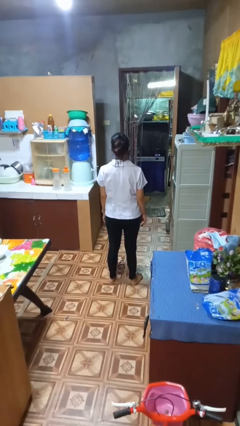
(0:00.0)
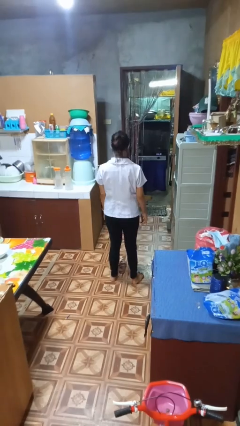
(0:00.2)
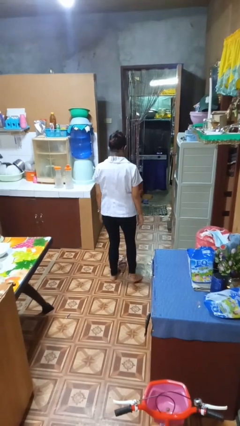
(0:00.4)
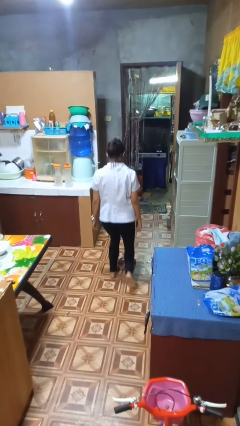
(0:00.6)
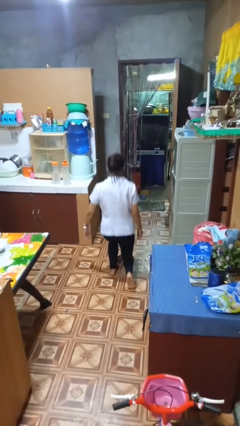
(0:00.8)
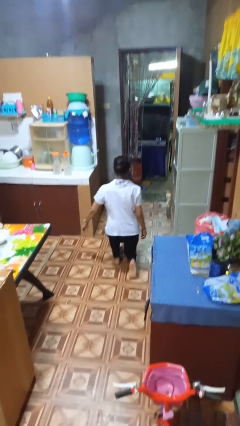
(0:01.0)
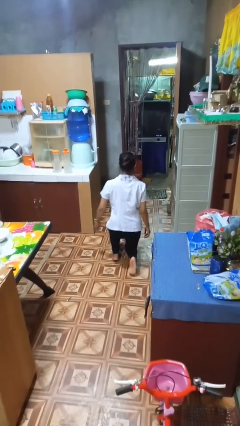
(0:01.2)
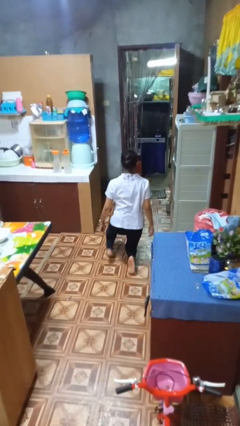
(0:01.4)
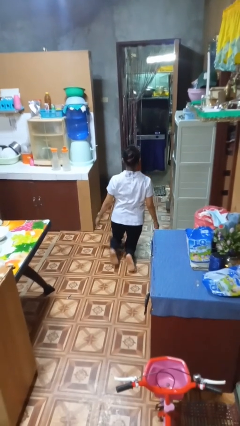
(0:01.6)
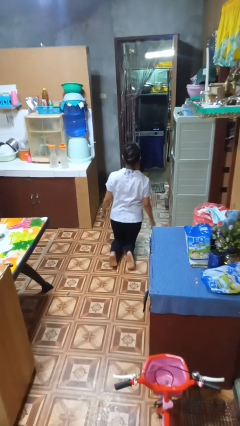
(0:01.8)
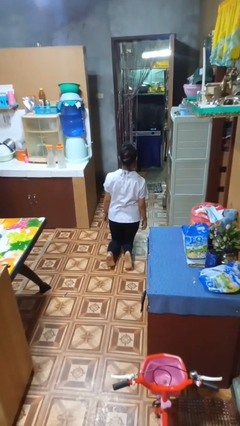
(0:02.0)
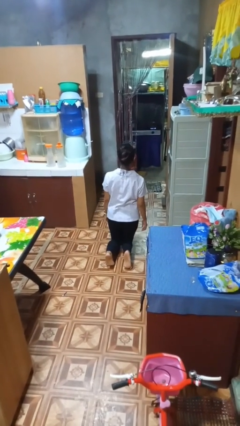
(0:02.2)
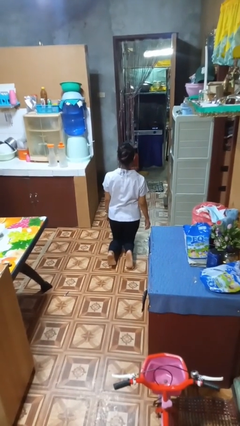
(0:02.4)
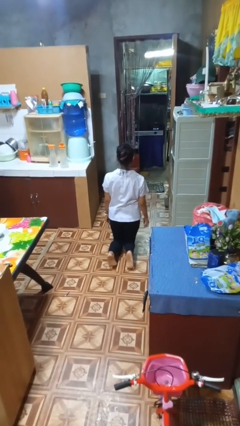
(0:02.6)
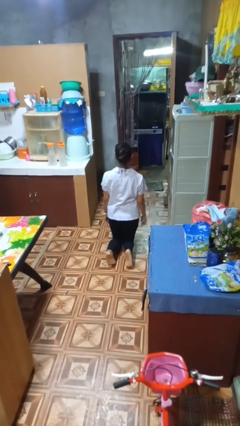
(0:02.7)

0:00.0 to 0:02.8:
person kneels

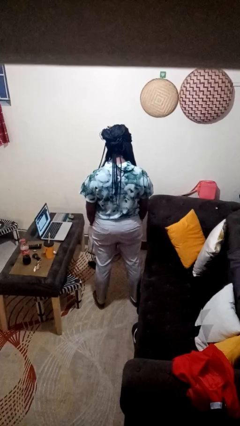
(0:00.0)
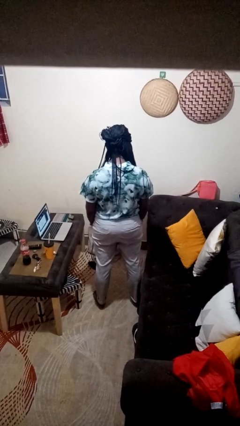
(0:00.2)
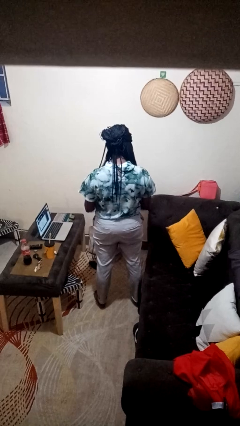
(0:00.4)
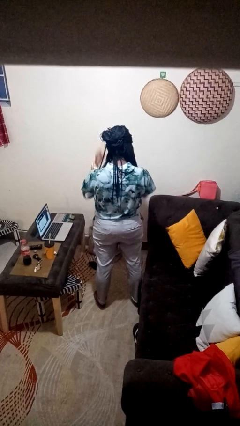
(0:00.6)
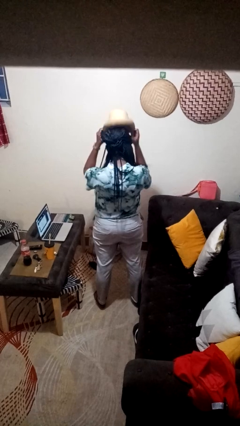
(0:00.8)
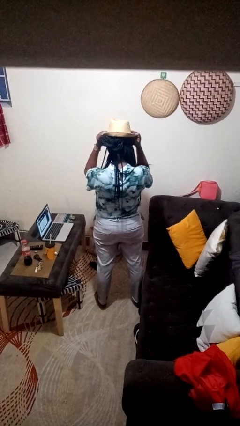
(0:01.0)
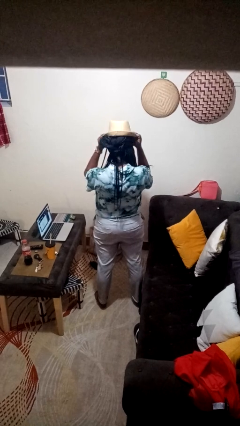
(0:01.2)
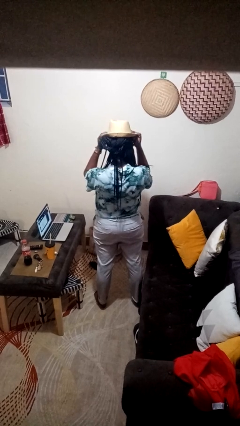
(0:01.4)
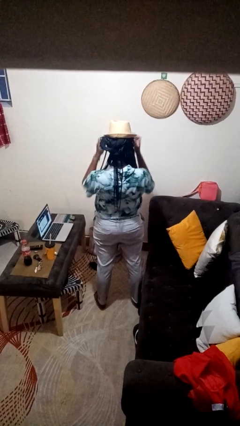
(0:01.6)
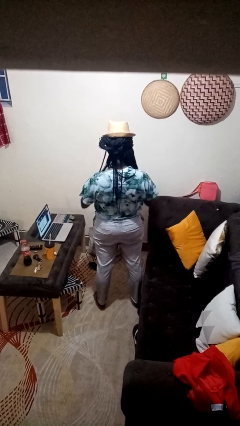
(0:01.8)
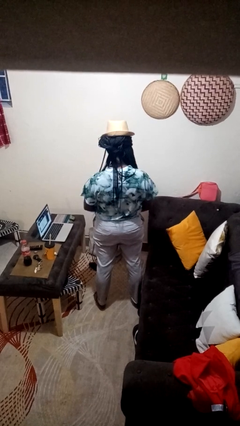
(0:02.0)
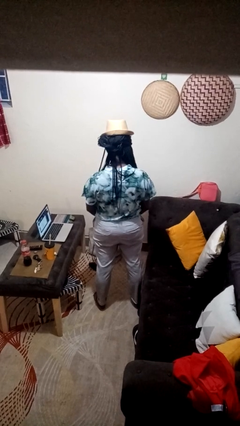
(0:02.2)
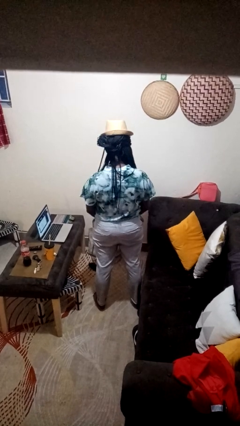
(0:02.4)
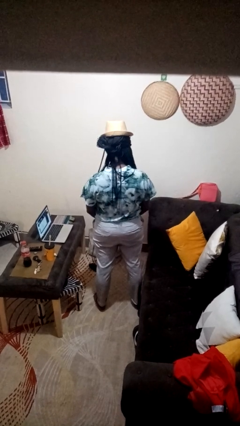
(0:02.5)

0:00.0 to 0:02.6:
person puts on hat

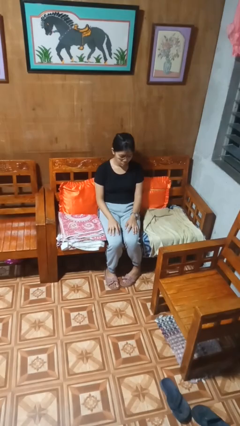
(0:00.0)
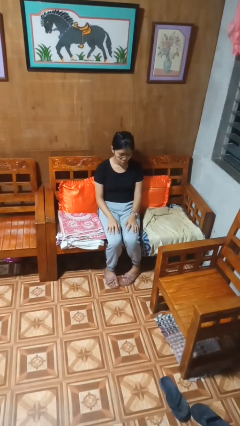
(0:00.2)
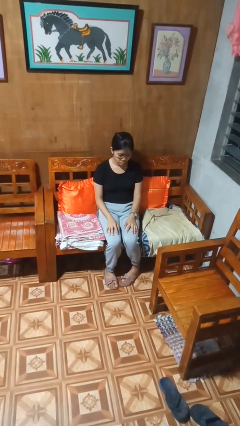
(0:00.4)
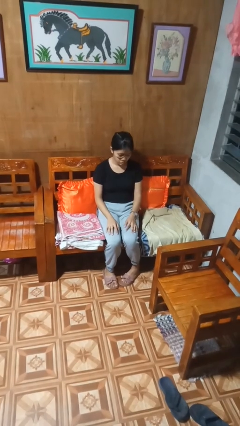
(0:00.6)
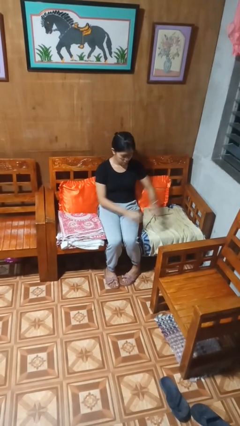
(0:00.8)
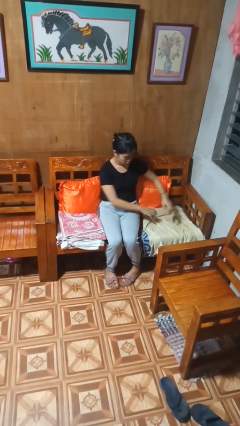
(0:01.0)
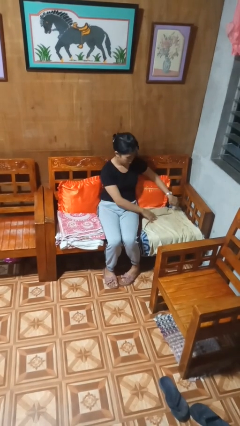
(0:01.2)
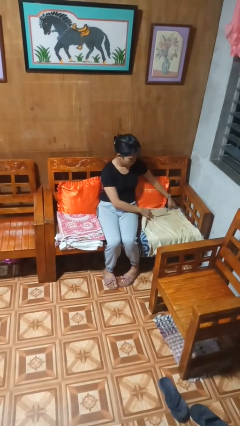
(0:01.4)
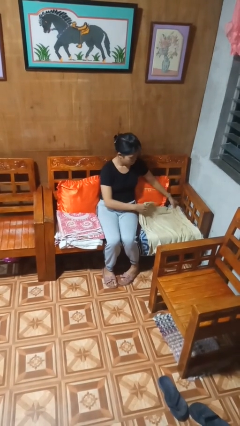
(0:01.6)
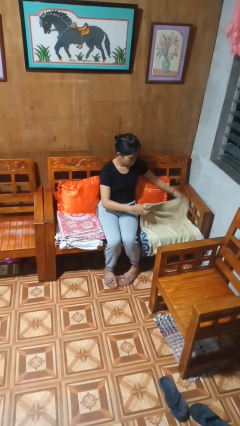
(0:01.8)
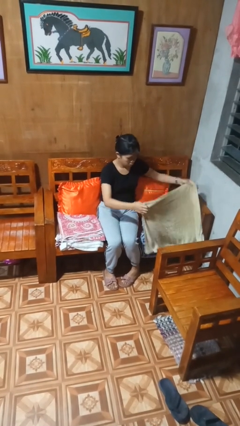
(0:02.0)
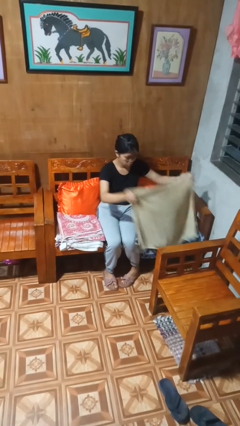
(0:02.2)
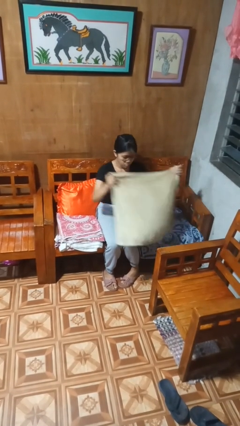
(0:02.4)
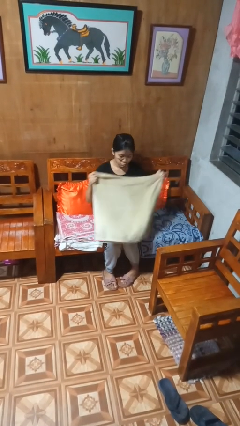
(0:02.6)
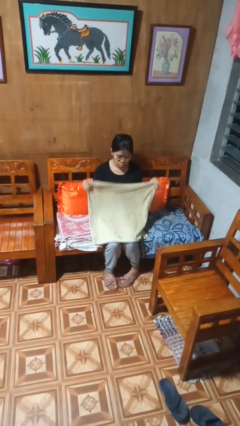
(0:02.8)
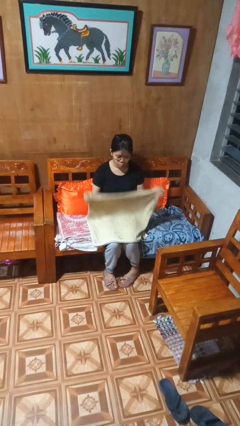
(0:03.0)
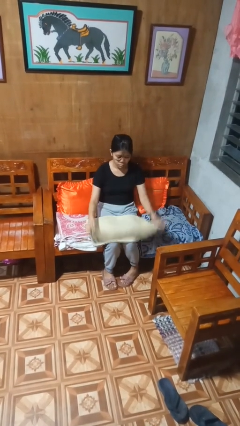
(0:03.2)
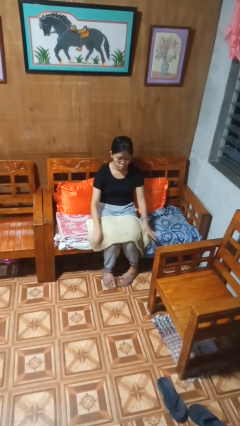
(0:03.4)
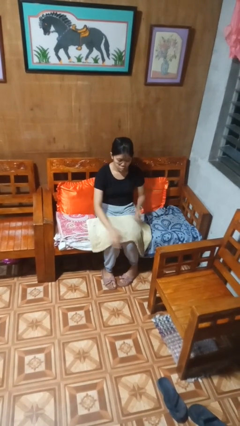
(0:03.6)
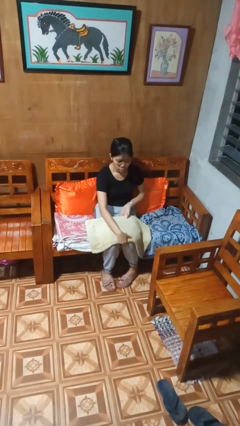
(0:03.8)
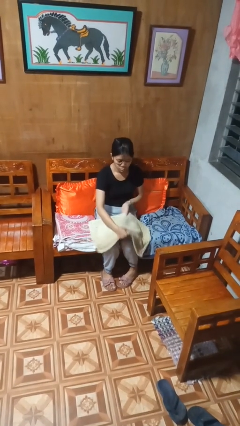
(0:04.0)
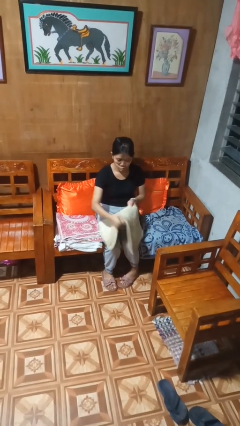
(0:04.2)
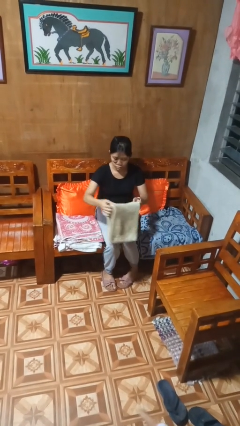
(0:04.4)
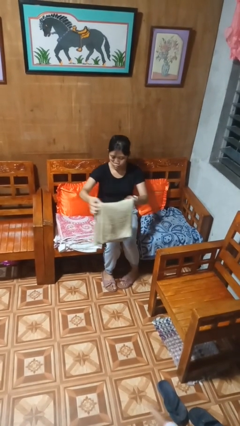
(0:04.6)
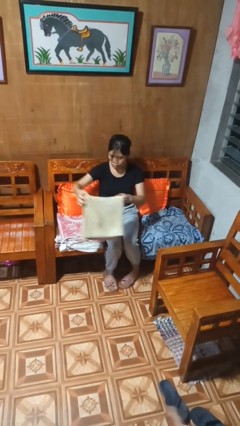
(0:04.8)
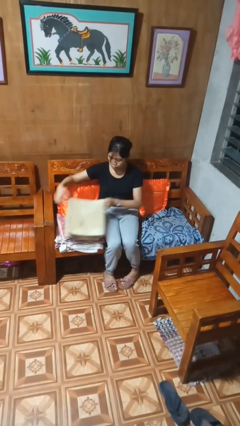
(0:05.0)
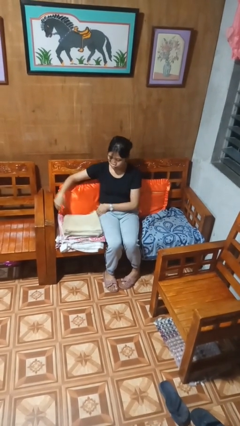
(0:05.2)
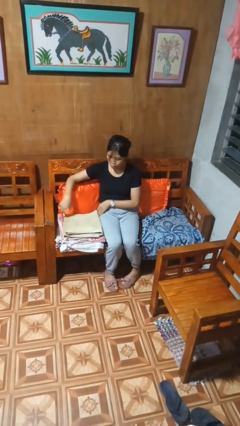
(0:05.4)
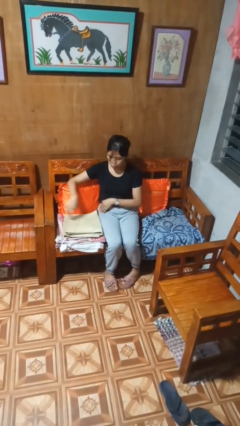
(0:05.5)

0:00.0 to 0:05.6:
person folds towel

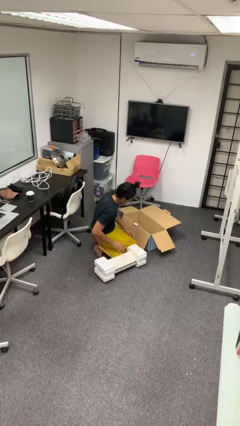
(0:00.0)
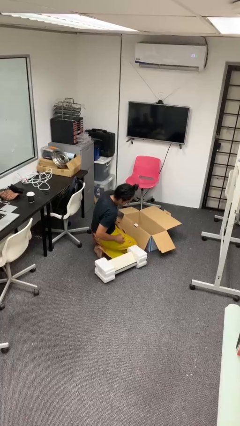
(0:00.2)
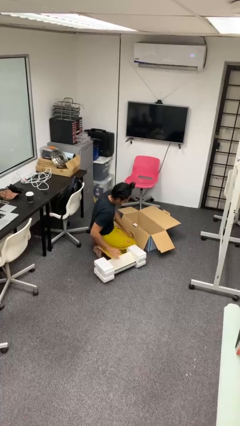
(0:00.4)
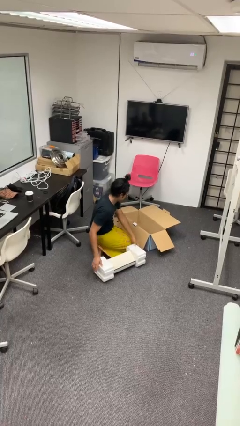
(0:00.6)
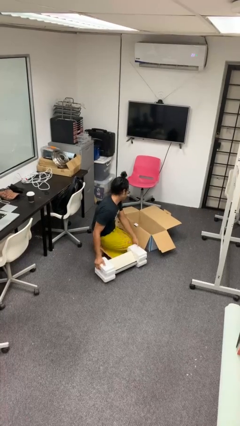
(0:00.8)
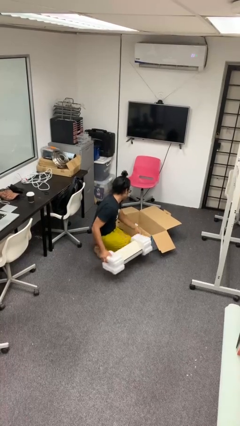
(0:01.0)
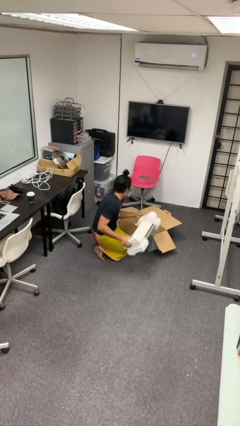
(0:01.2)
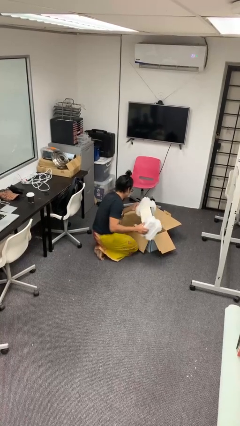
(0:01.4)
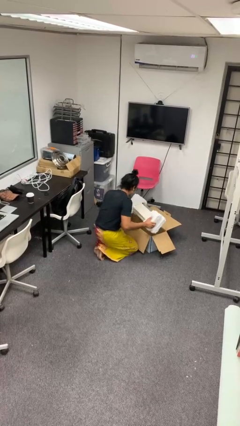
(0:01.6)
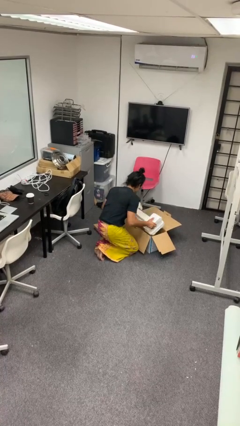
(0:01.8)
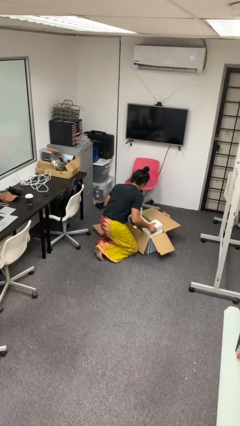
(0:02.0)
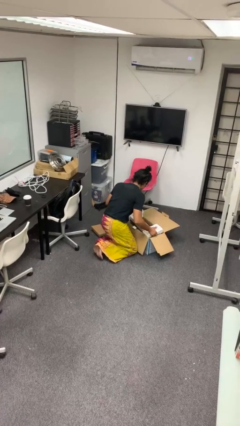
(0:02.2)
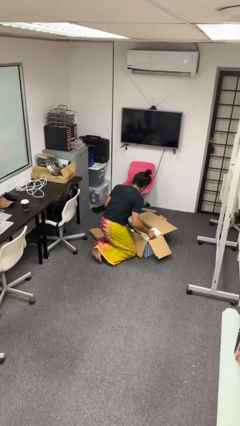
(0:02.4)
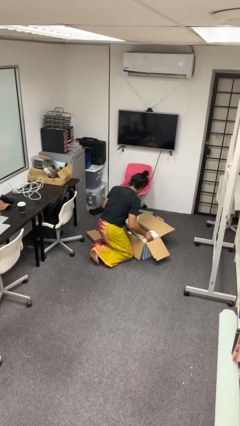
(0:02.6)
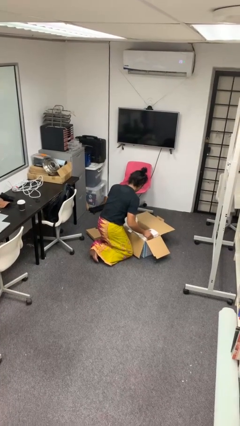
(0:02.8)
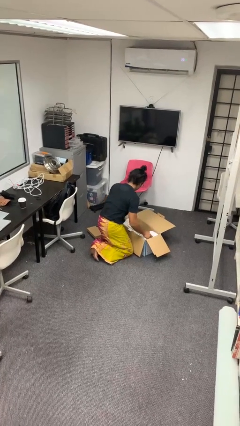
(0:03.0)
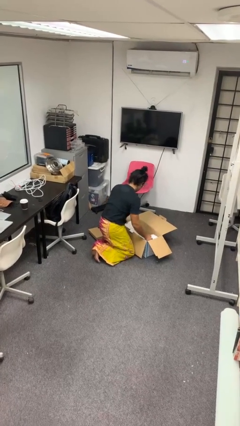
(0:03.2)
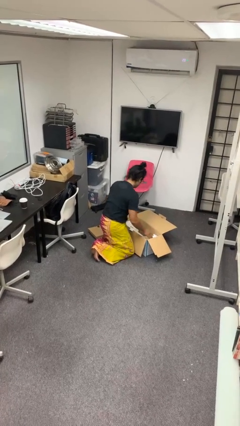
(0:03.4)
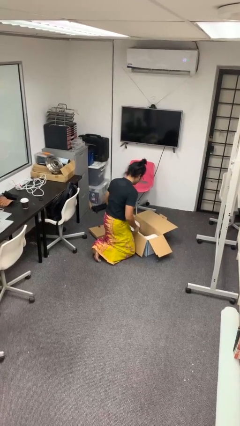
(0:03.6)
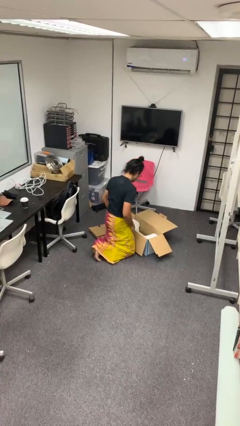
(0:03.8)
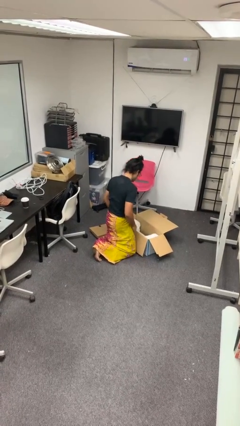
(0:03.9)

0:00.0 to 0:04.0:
person puts object into box

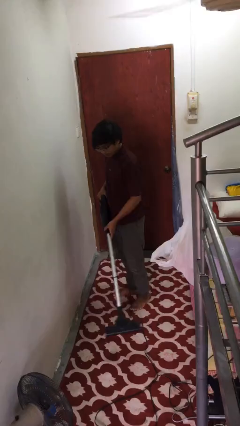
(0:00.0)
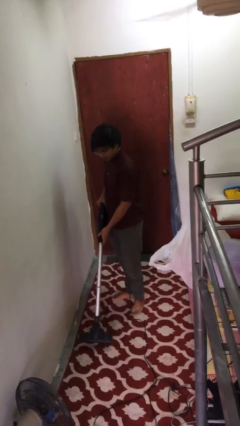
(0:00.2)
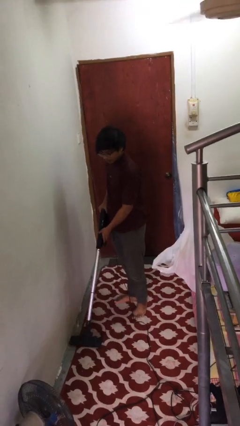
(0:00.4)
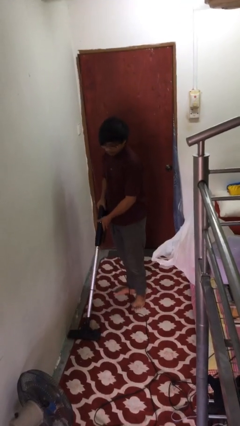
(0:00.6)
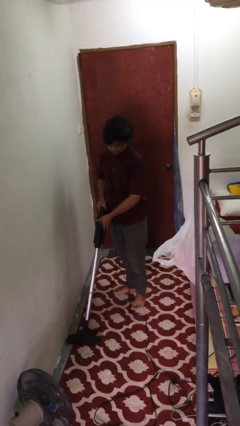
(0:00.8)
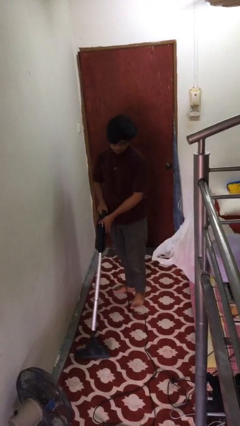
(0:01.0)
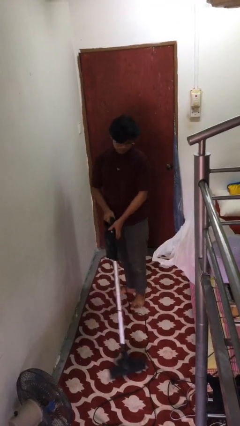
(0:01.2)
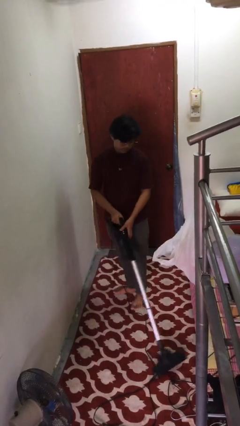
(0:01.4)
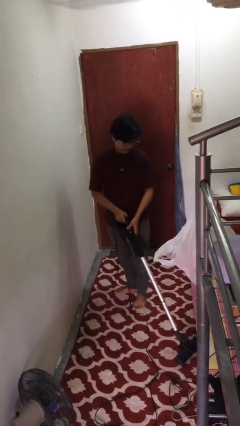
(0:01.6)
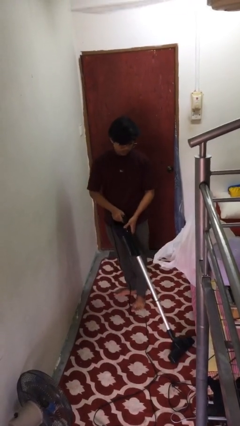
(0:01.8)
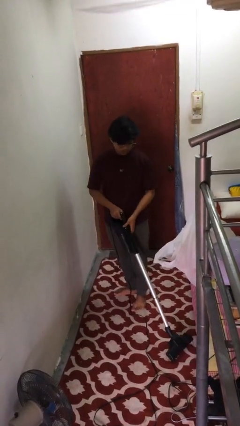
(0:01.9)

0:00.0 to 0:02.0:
person vacuums carpet

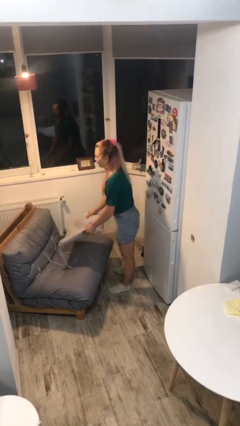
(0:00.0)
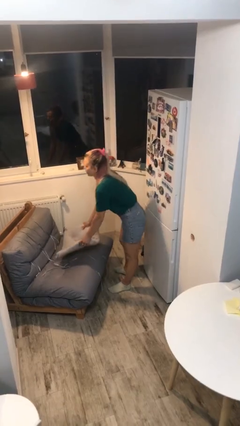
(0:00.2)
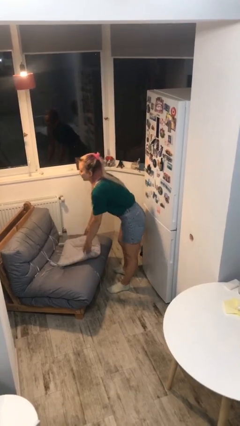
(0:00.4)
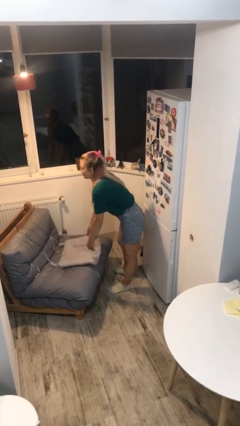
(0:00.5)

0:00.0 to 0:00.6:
person puts down object on couch
